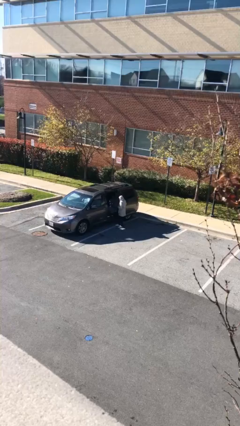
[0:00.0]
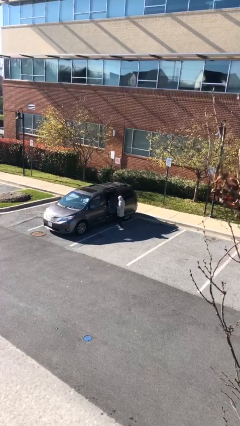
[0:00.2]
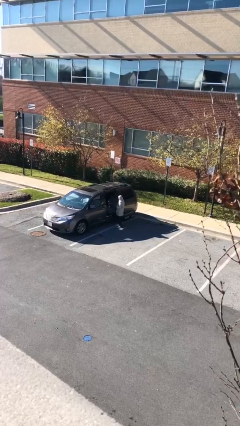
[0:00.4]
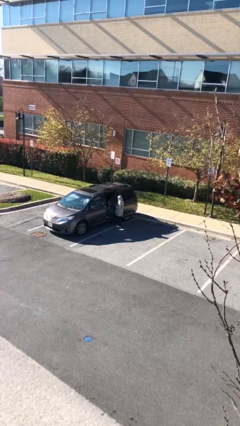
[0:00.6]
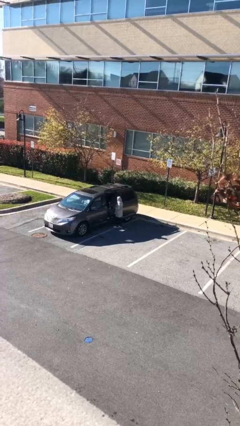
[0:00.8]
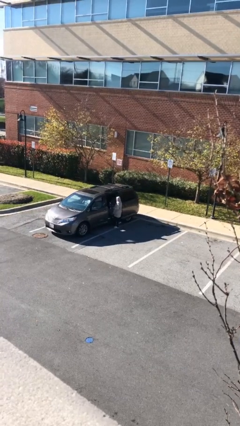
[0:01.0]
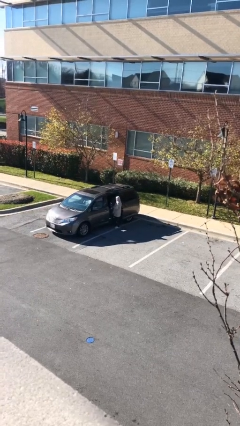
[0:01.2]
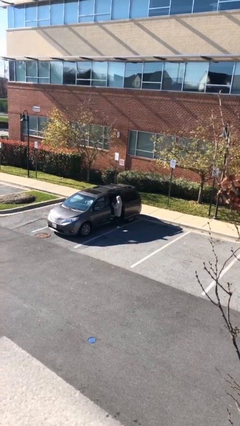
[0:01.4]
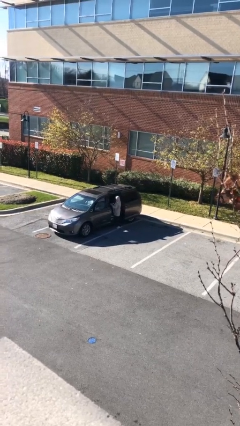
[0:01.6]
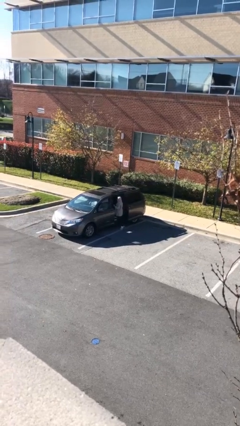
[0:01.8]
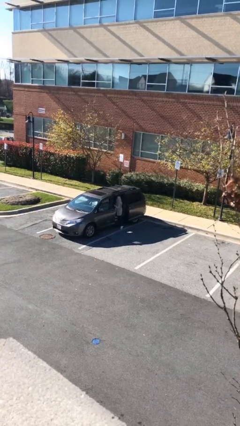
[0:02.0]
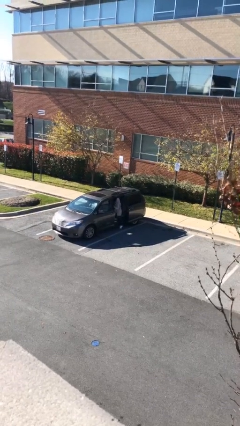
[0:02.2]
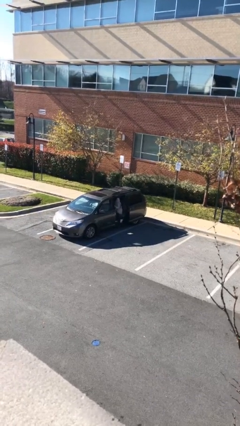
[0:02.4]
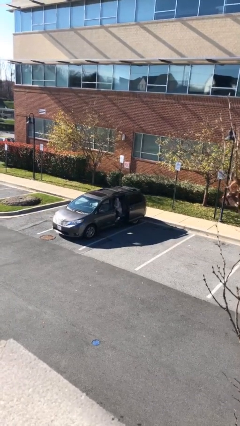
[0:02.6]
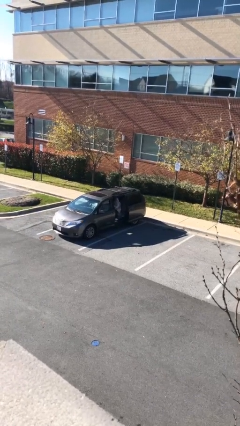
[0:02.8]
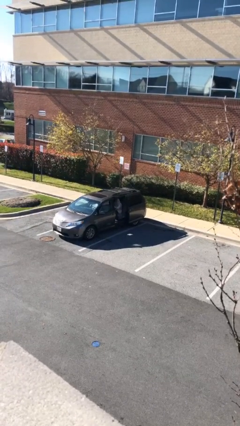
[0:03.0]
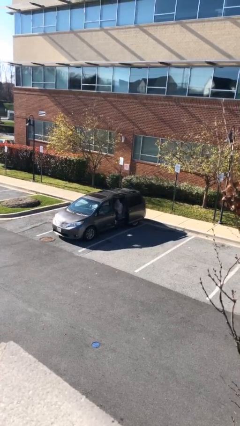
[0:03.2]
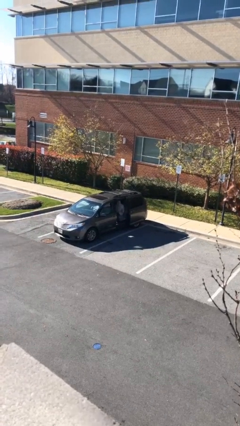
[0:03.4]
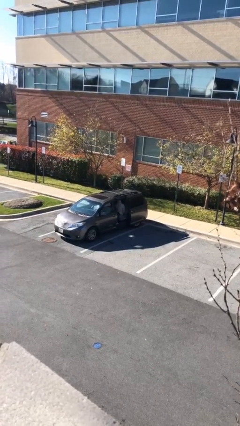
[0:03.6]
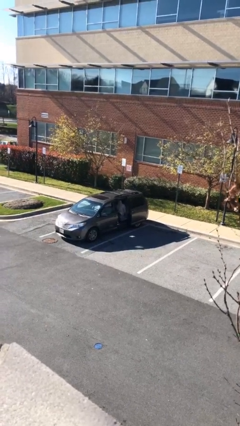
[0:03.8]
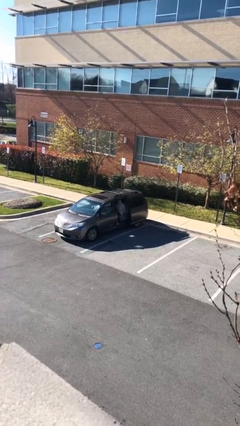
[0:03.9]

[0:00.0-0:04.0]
person enters car

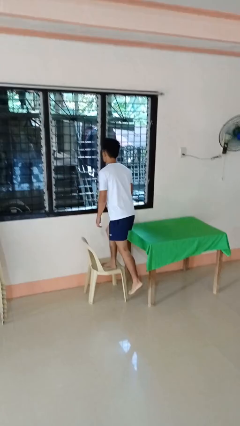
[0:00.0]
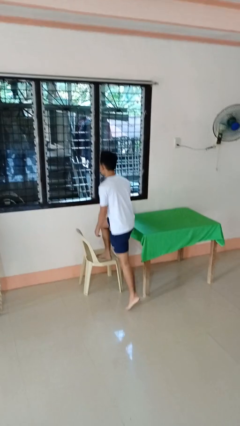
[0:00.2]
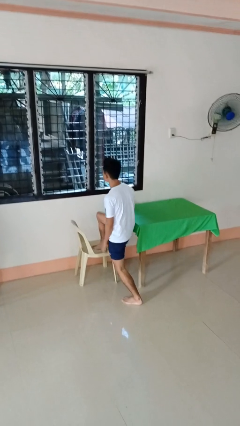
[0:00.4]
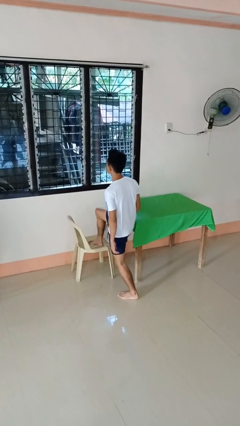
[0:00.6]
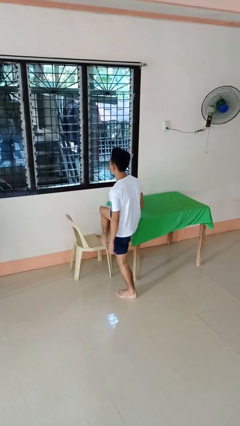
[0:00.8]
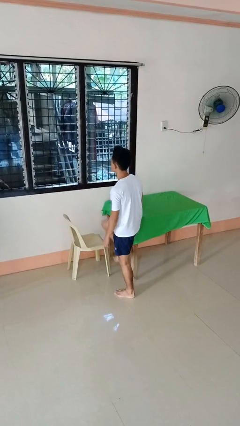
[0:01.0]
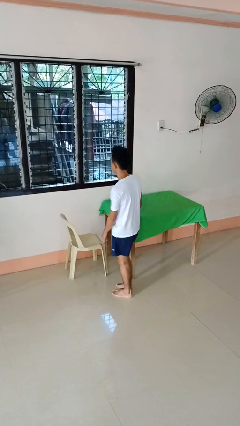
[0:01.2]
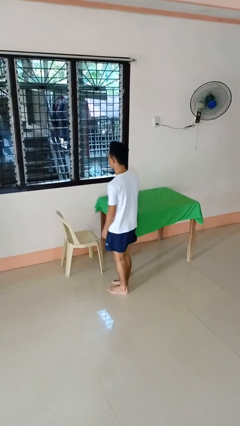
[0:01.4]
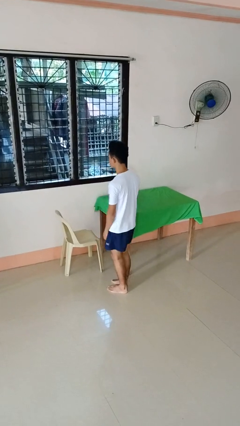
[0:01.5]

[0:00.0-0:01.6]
person climbs off chair

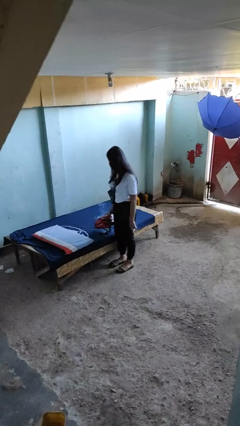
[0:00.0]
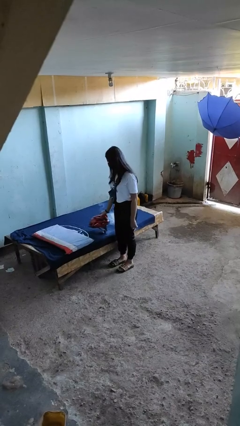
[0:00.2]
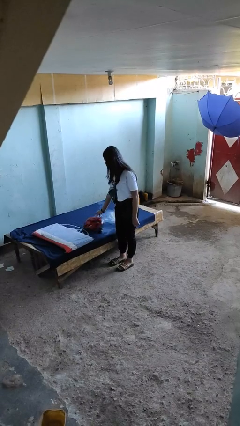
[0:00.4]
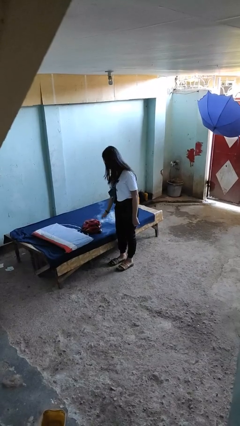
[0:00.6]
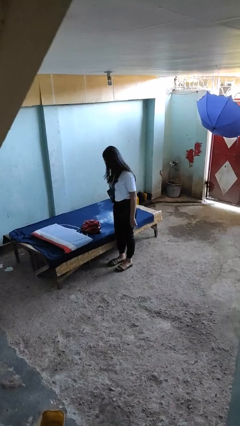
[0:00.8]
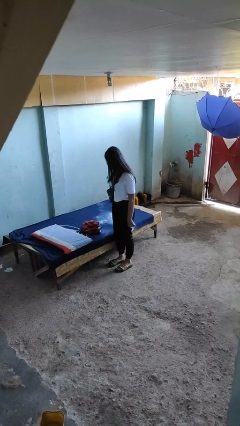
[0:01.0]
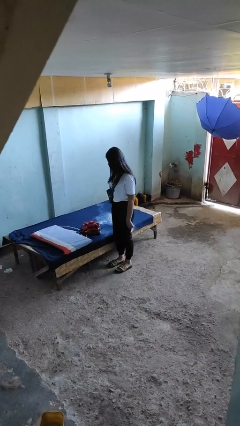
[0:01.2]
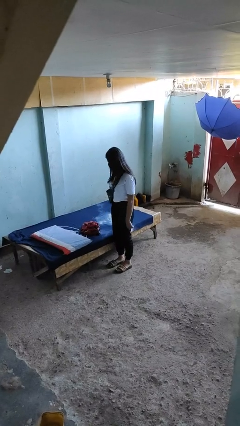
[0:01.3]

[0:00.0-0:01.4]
person puts down object on bed

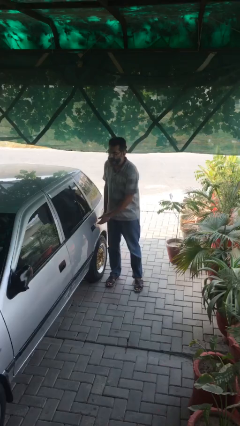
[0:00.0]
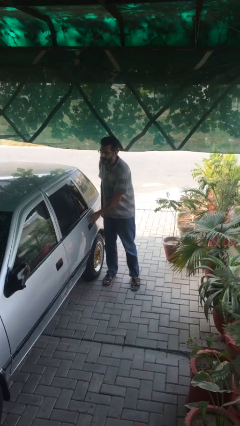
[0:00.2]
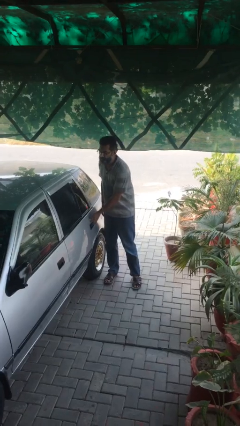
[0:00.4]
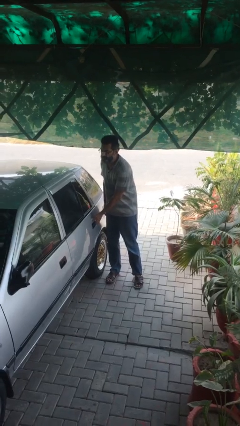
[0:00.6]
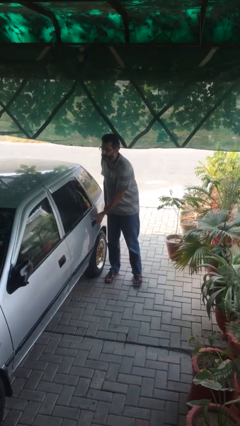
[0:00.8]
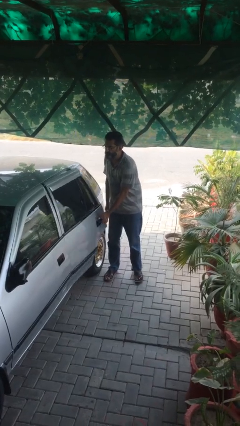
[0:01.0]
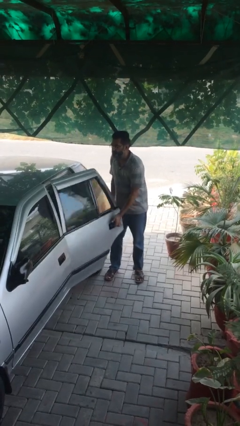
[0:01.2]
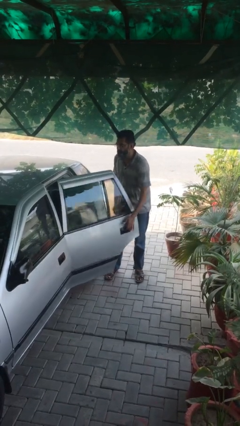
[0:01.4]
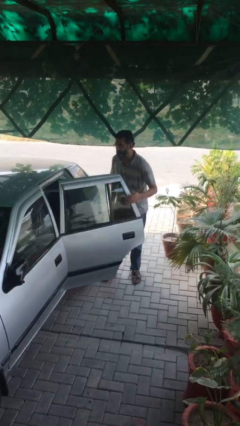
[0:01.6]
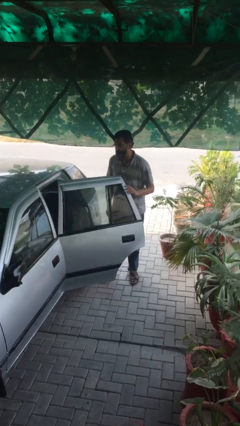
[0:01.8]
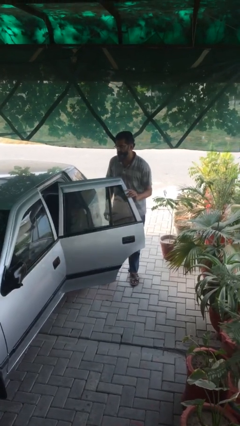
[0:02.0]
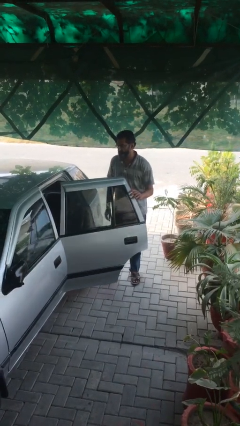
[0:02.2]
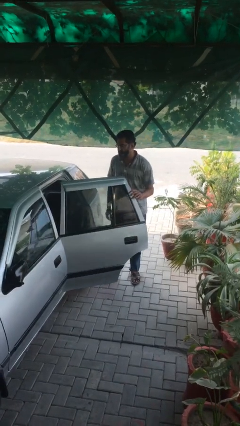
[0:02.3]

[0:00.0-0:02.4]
person opens car door

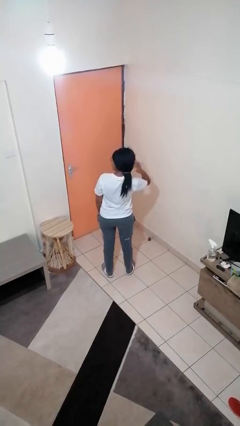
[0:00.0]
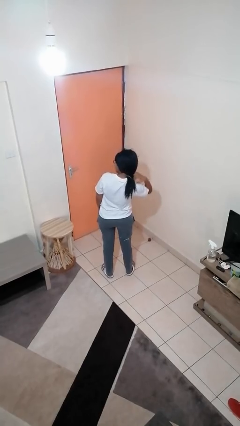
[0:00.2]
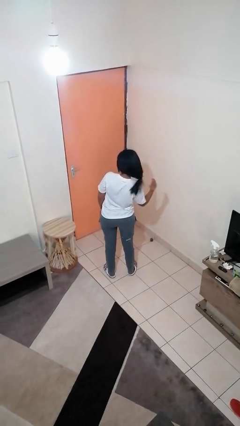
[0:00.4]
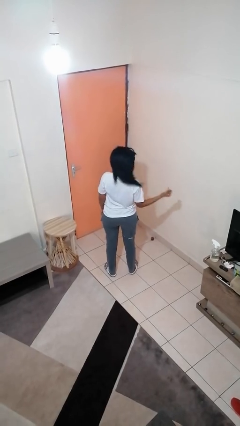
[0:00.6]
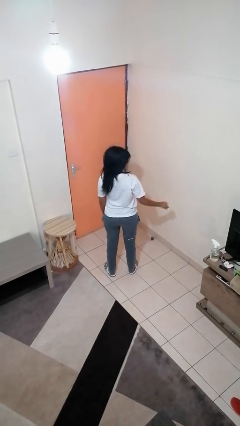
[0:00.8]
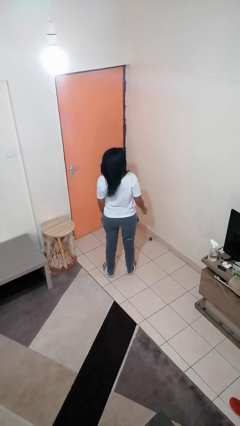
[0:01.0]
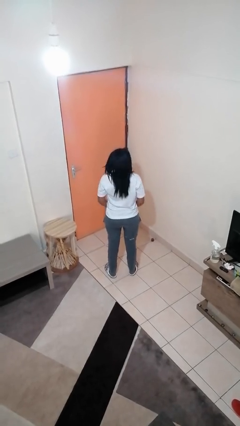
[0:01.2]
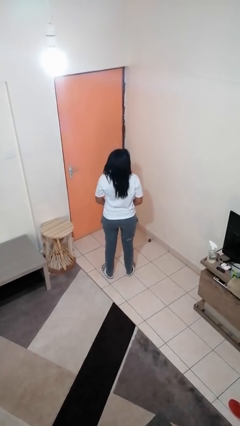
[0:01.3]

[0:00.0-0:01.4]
person takes off hairtie

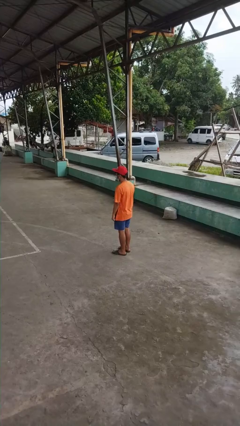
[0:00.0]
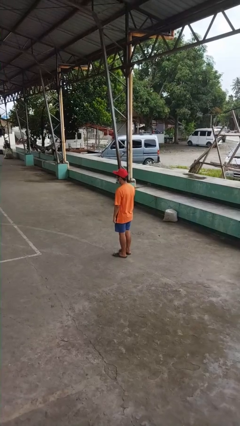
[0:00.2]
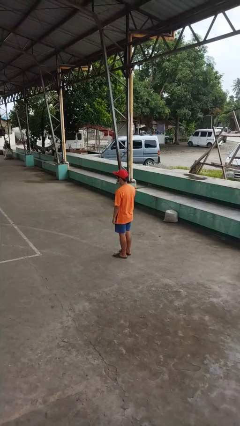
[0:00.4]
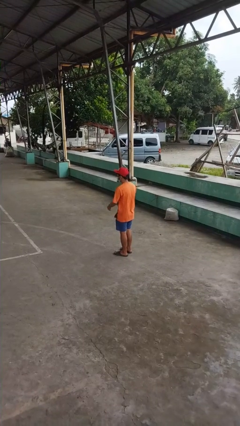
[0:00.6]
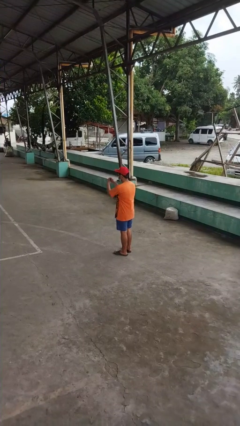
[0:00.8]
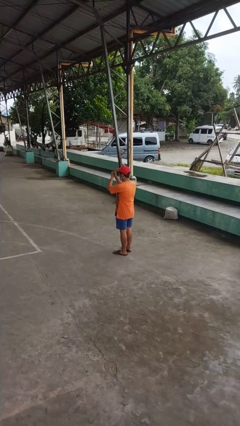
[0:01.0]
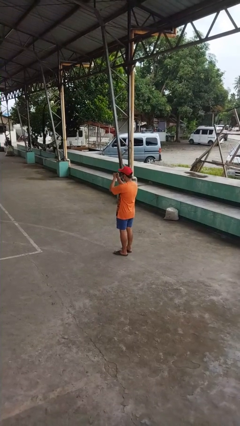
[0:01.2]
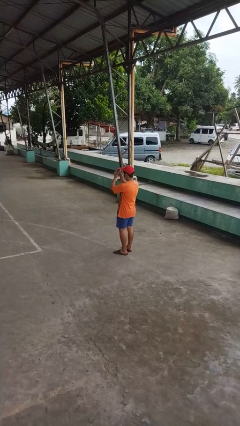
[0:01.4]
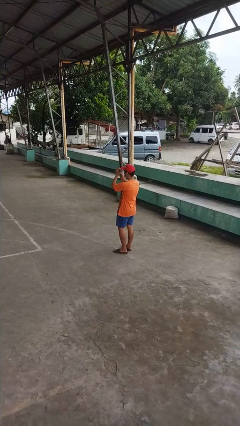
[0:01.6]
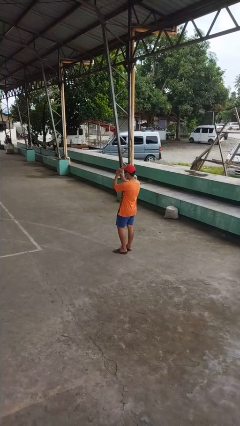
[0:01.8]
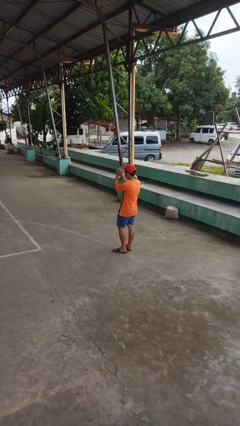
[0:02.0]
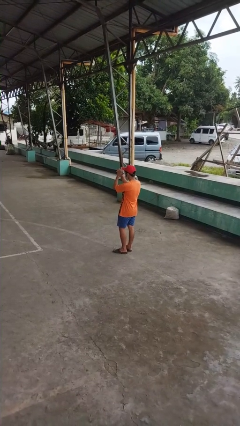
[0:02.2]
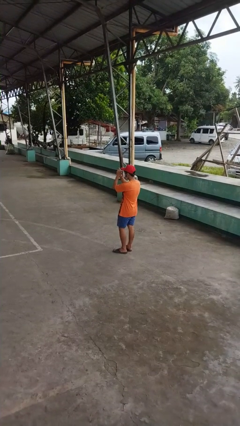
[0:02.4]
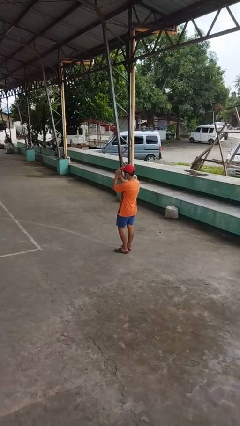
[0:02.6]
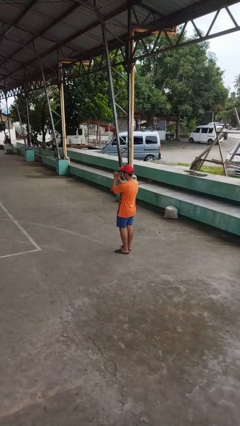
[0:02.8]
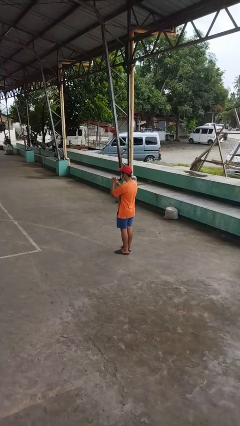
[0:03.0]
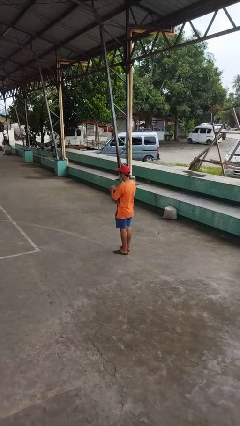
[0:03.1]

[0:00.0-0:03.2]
person cracks knuckles

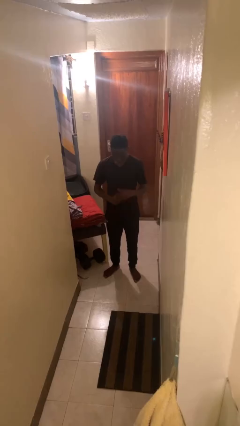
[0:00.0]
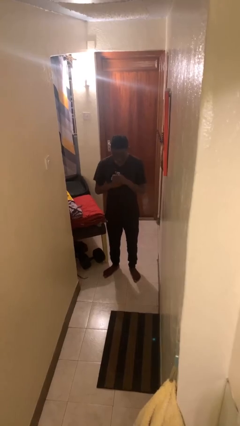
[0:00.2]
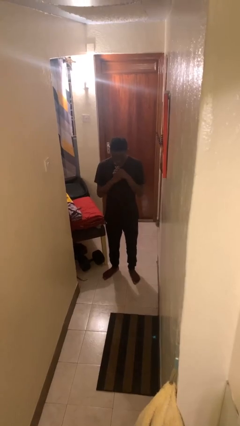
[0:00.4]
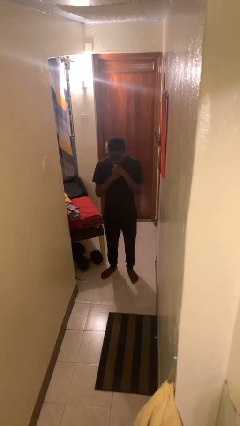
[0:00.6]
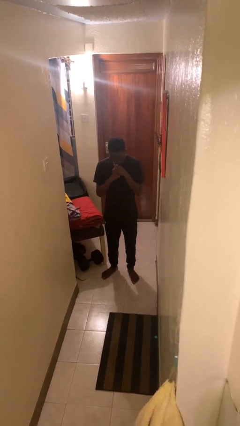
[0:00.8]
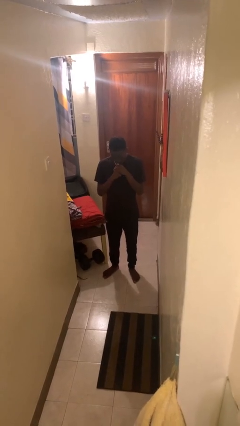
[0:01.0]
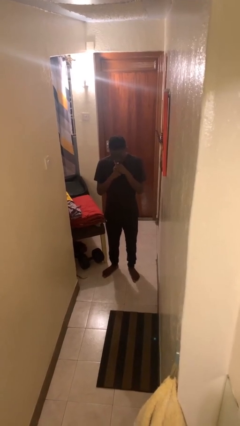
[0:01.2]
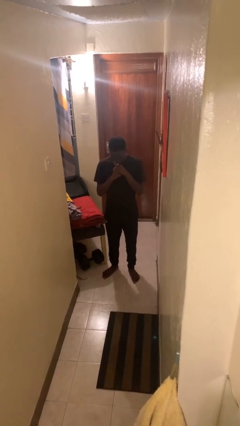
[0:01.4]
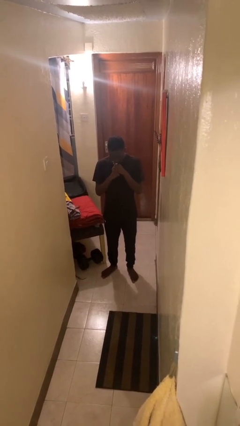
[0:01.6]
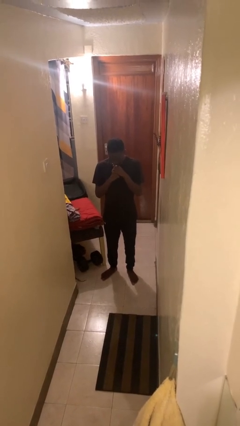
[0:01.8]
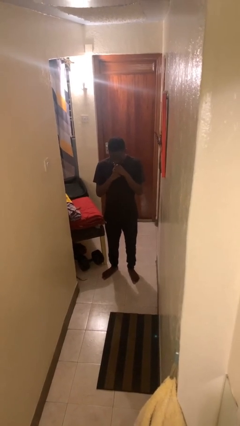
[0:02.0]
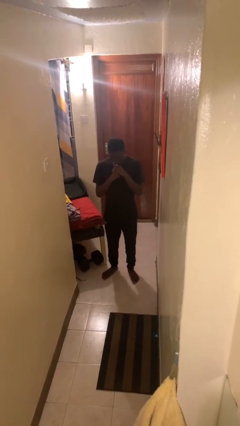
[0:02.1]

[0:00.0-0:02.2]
person vapes

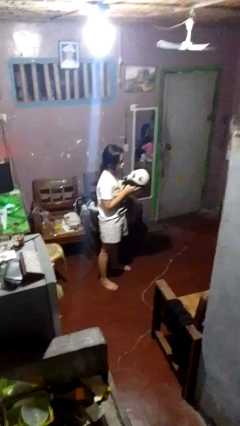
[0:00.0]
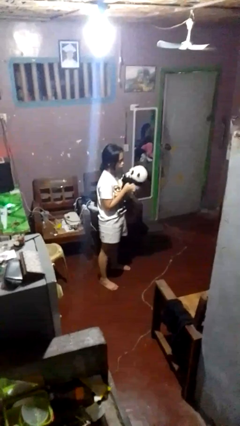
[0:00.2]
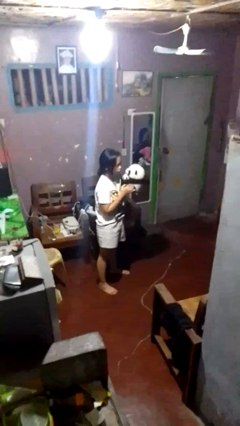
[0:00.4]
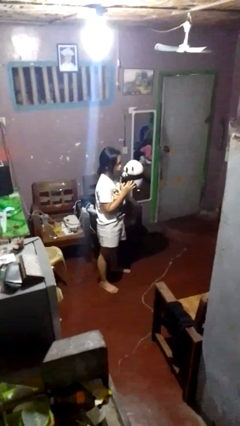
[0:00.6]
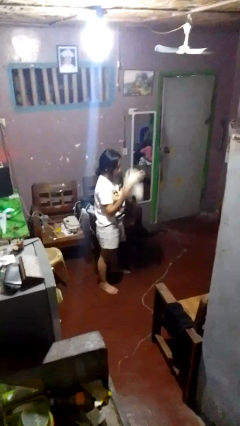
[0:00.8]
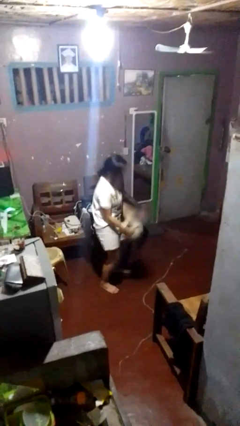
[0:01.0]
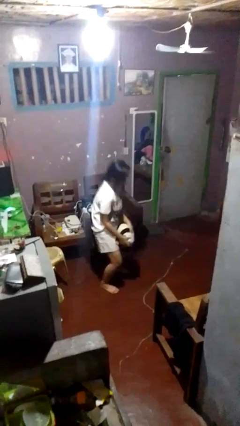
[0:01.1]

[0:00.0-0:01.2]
person drops object
